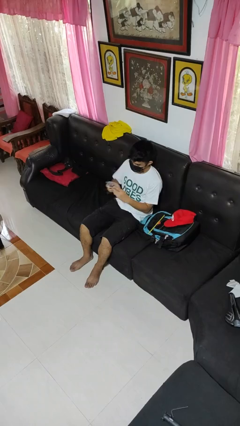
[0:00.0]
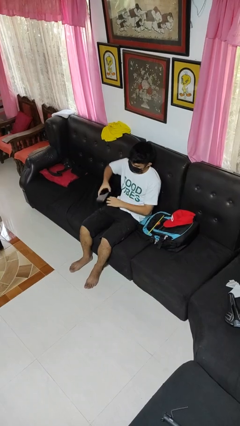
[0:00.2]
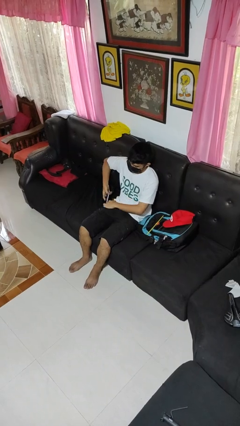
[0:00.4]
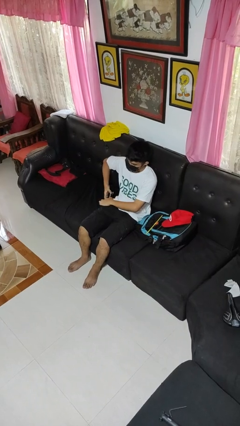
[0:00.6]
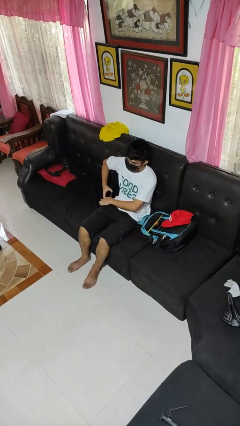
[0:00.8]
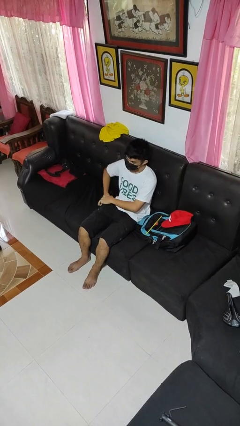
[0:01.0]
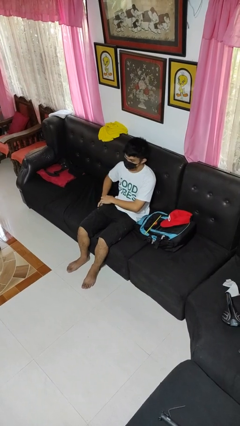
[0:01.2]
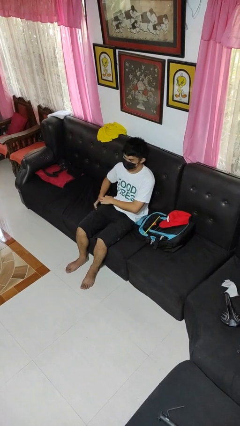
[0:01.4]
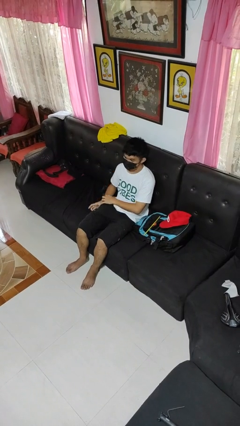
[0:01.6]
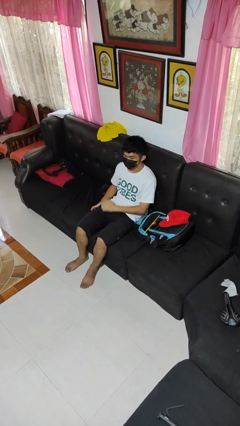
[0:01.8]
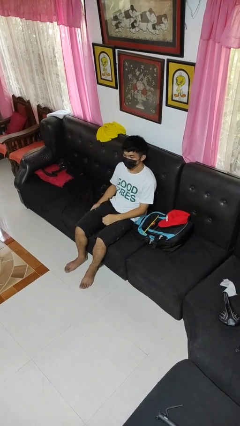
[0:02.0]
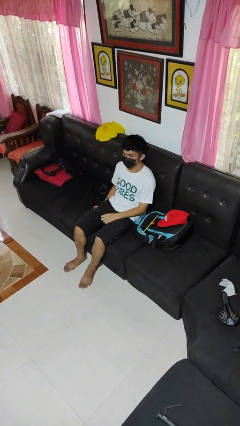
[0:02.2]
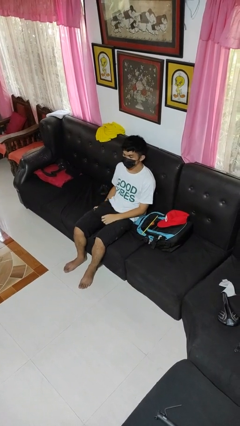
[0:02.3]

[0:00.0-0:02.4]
person puts phone into pocket

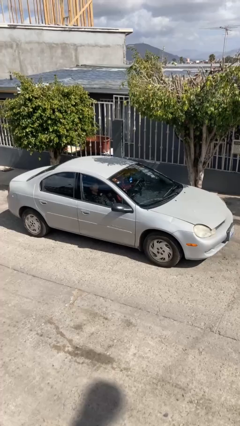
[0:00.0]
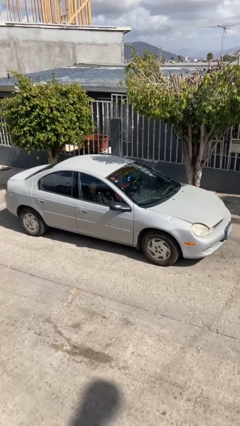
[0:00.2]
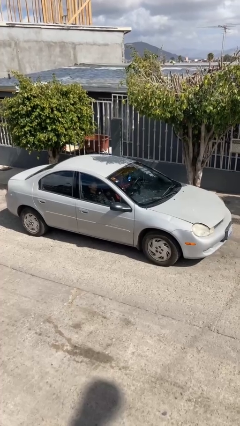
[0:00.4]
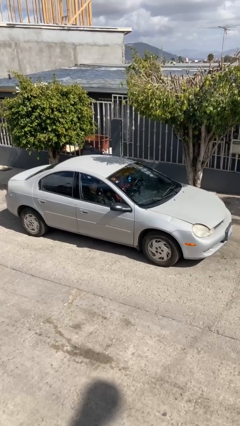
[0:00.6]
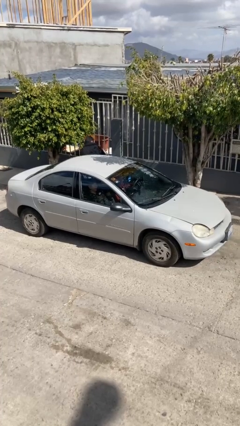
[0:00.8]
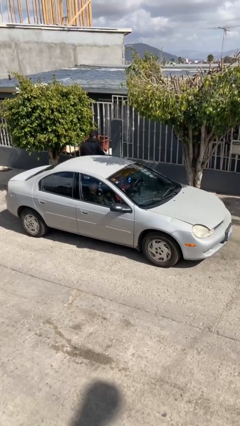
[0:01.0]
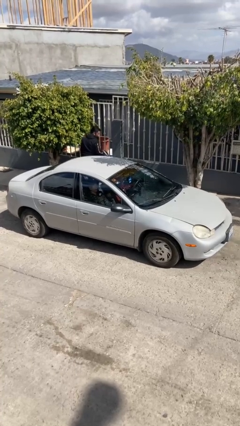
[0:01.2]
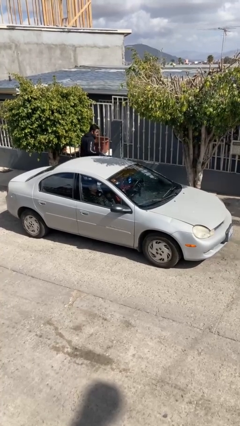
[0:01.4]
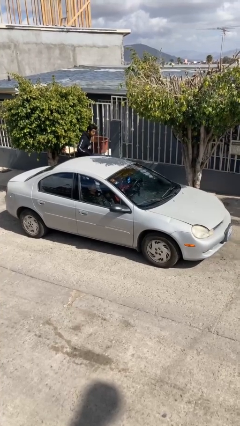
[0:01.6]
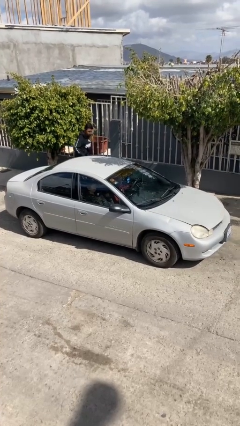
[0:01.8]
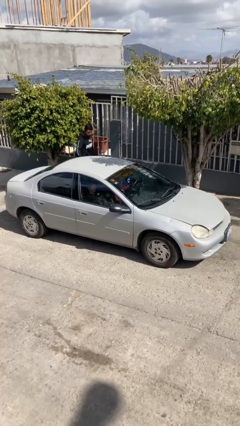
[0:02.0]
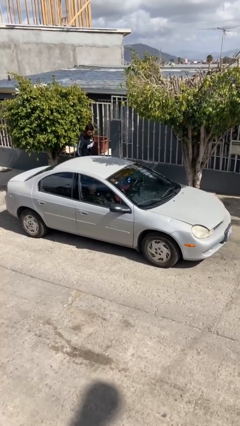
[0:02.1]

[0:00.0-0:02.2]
car drops off person

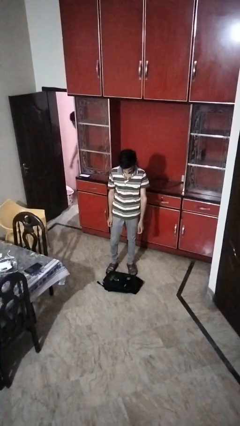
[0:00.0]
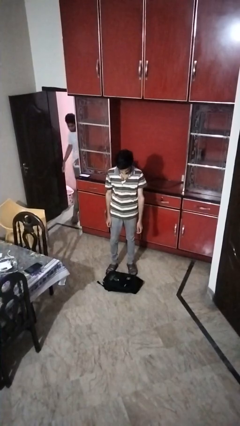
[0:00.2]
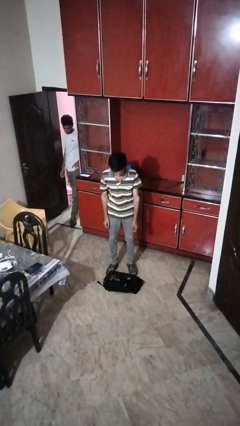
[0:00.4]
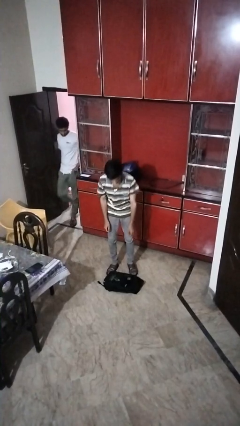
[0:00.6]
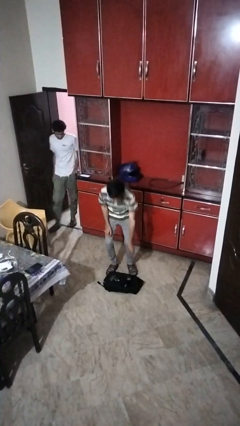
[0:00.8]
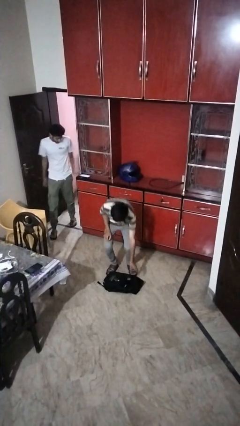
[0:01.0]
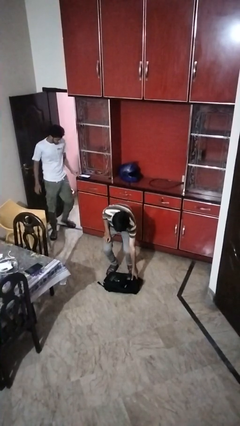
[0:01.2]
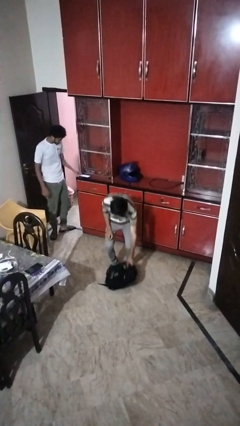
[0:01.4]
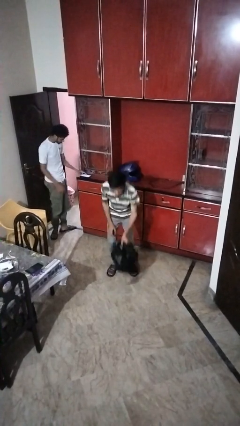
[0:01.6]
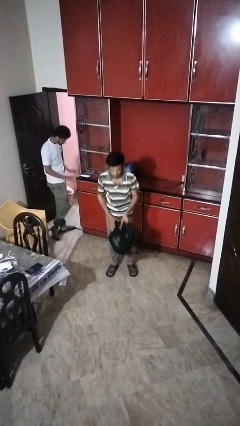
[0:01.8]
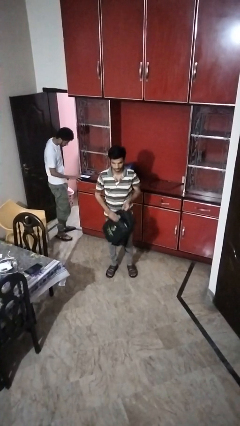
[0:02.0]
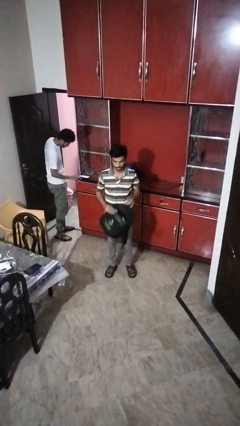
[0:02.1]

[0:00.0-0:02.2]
person picks up object from floor

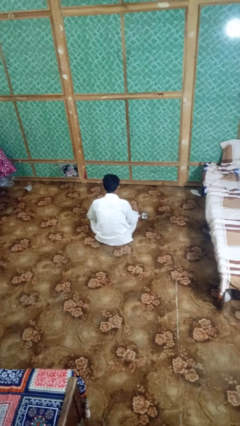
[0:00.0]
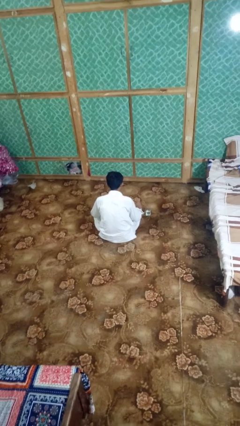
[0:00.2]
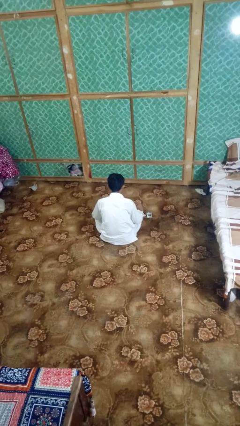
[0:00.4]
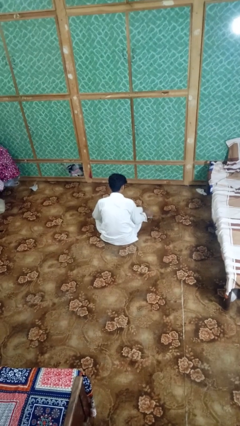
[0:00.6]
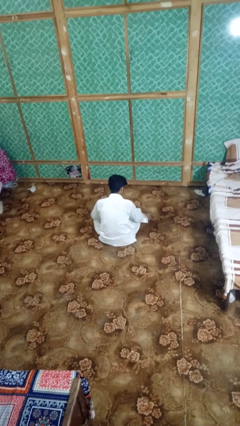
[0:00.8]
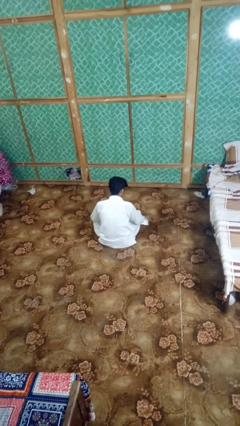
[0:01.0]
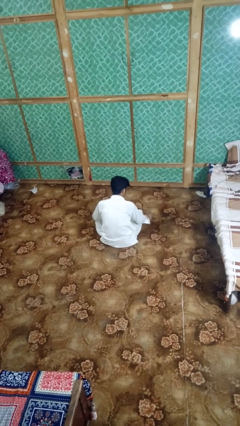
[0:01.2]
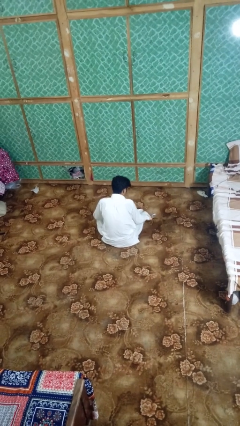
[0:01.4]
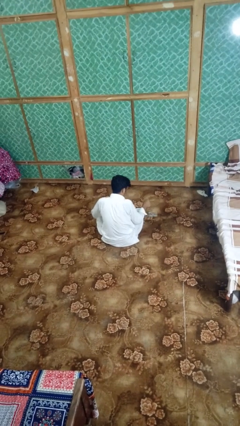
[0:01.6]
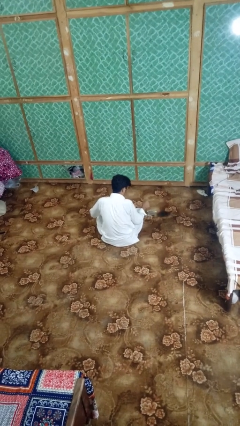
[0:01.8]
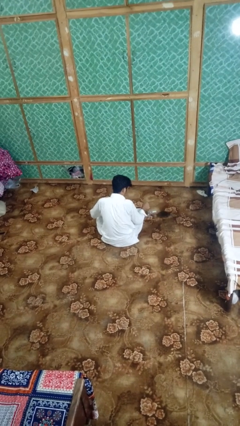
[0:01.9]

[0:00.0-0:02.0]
person spills on floor

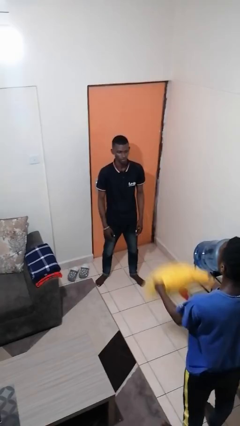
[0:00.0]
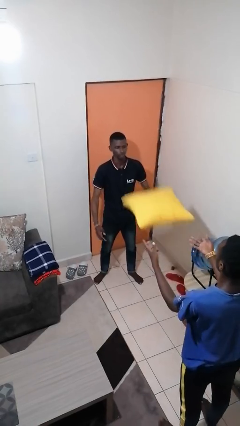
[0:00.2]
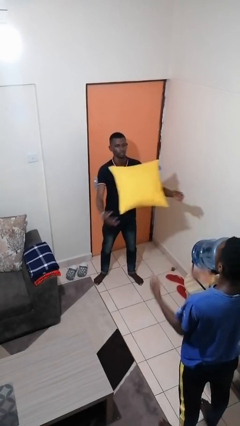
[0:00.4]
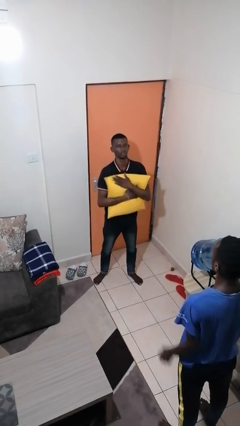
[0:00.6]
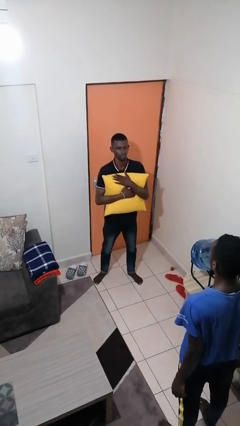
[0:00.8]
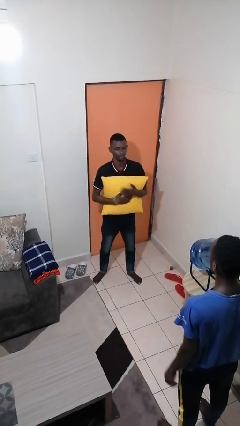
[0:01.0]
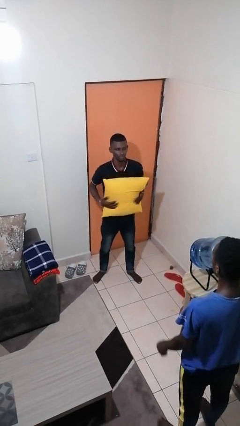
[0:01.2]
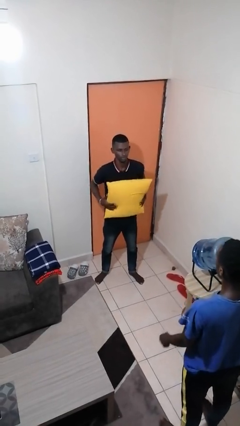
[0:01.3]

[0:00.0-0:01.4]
person catches object from person

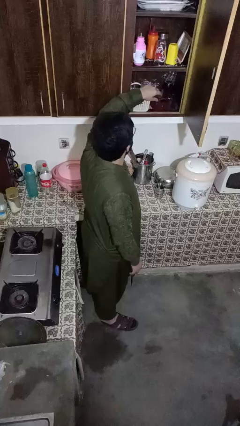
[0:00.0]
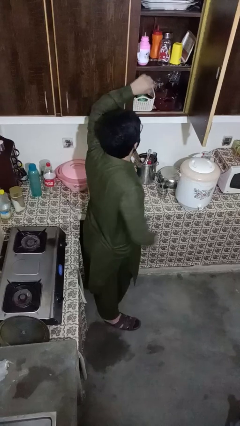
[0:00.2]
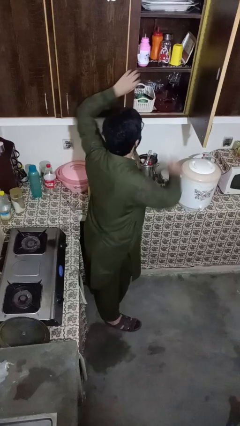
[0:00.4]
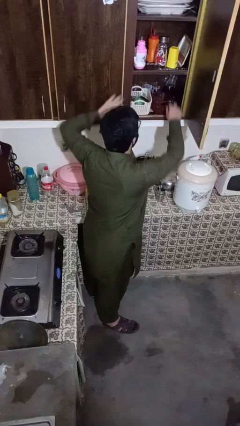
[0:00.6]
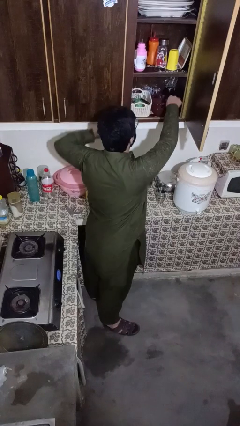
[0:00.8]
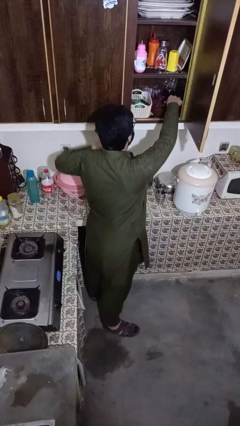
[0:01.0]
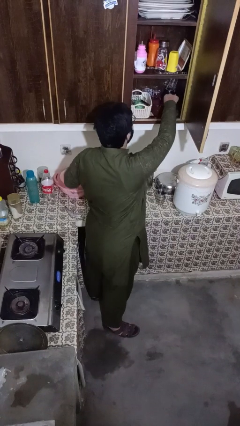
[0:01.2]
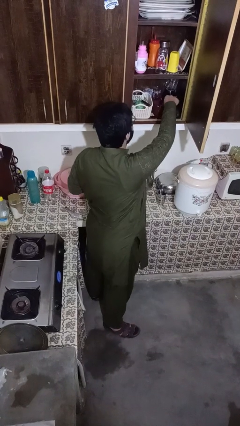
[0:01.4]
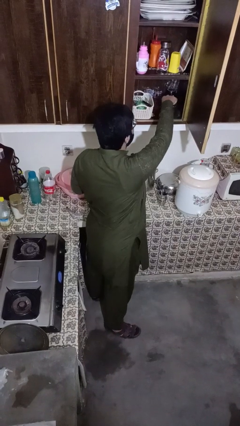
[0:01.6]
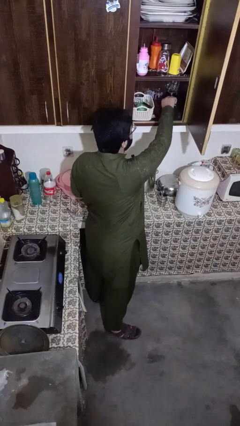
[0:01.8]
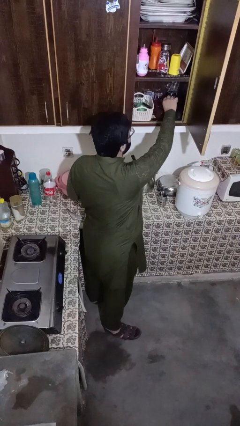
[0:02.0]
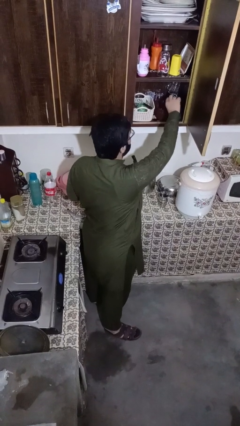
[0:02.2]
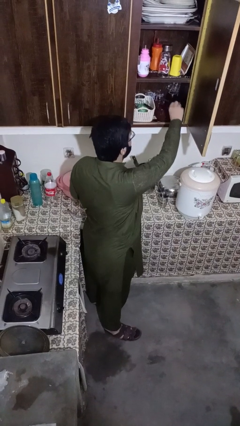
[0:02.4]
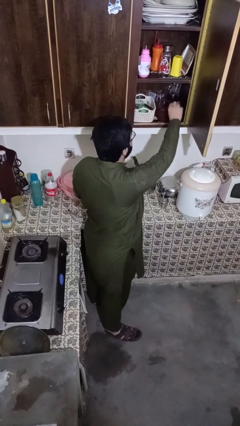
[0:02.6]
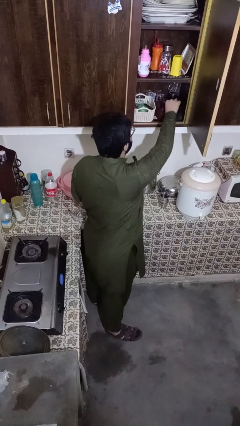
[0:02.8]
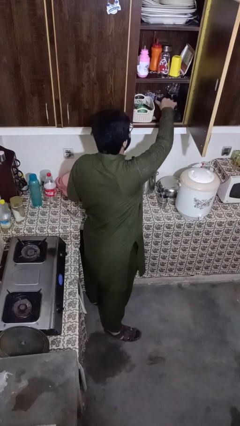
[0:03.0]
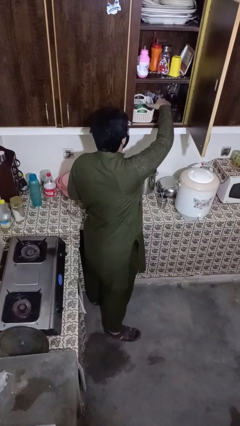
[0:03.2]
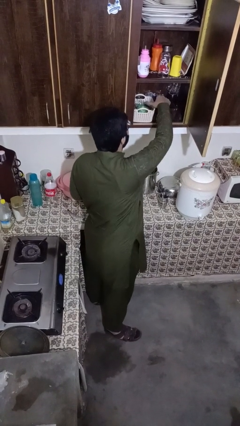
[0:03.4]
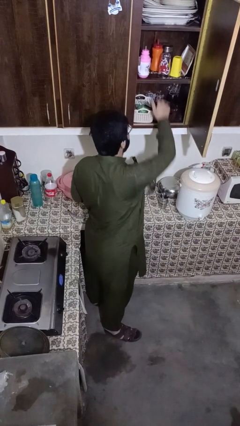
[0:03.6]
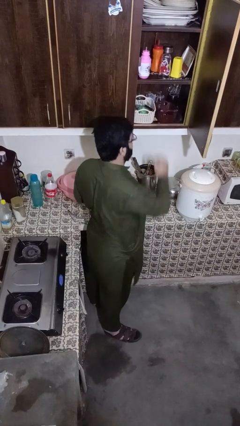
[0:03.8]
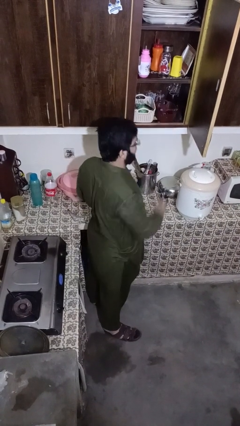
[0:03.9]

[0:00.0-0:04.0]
person searches in kitchen drawer

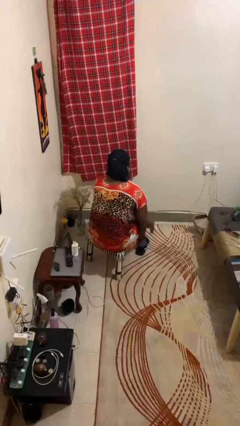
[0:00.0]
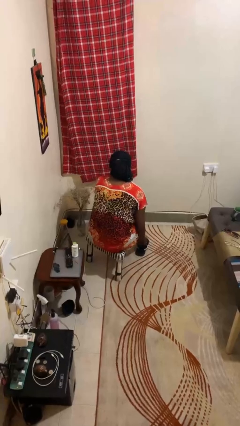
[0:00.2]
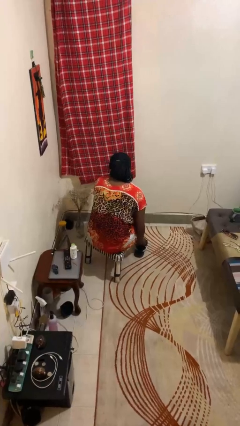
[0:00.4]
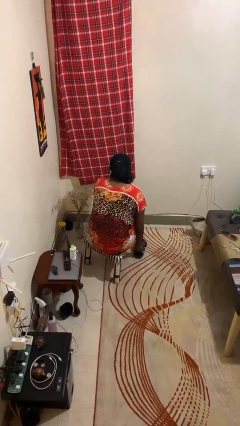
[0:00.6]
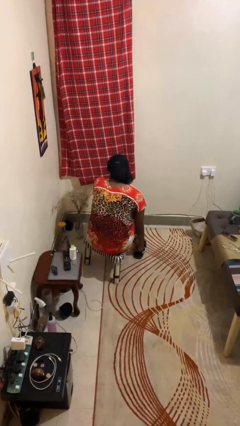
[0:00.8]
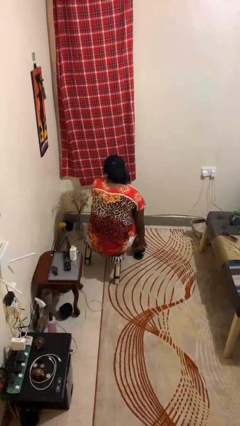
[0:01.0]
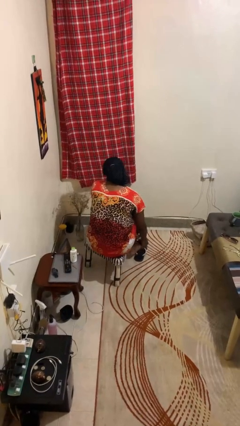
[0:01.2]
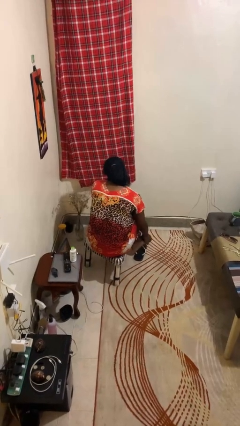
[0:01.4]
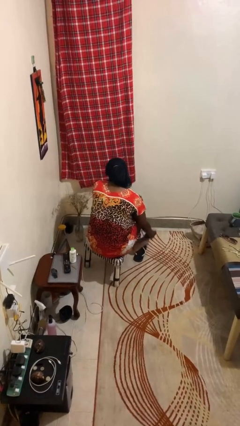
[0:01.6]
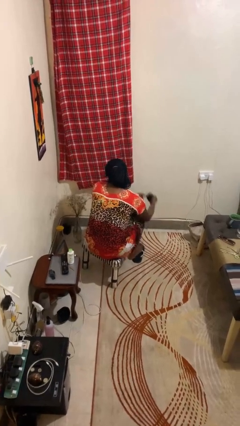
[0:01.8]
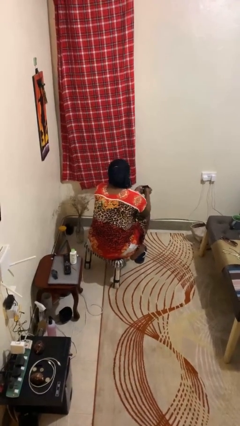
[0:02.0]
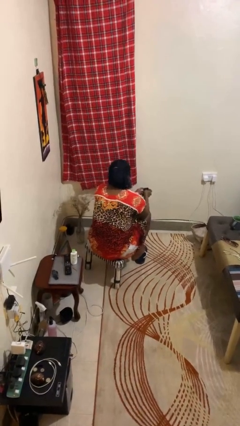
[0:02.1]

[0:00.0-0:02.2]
person takes off socks

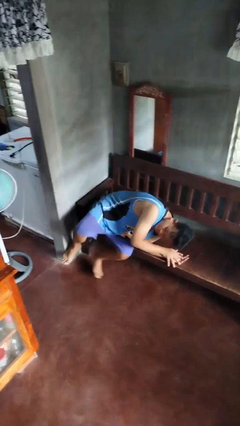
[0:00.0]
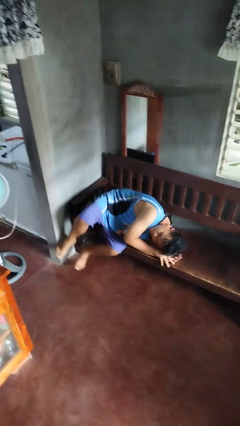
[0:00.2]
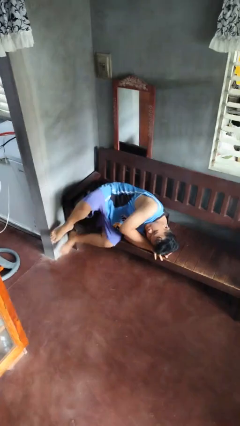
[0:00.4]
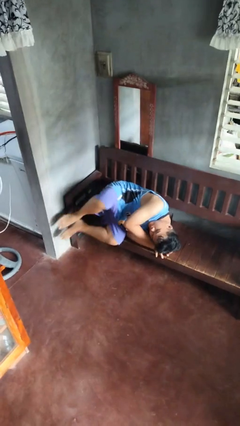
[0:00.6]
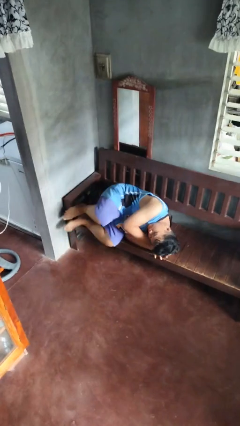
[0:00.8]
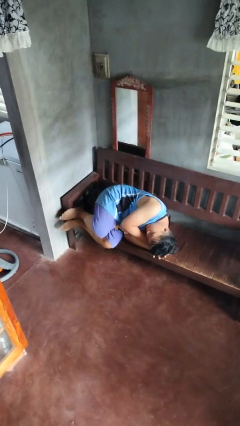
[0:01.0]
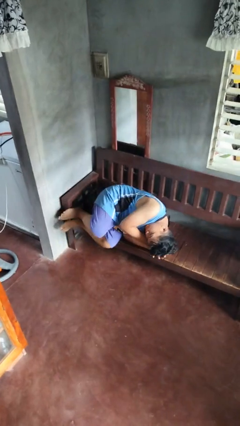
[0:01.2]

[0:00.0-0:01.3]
person lies down on couch
